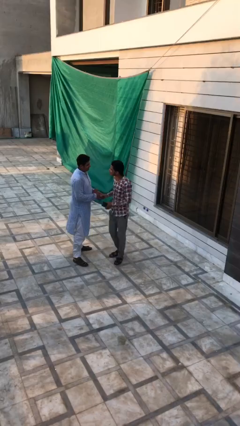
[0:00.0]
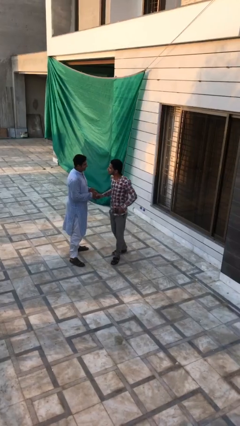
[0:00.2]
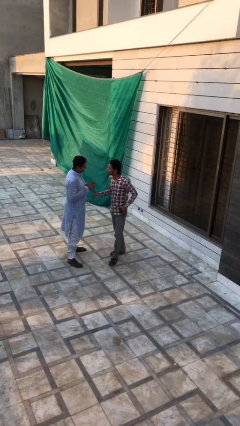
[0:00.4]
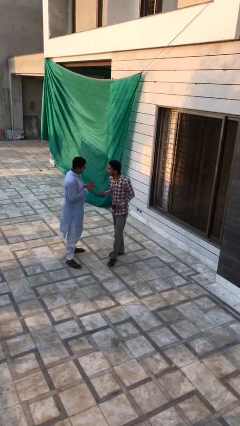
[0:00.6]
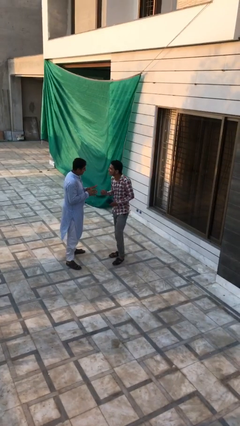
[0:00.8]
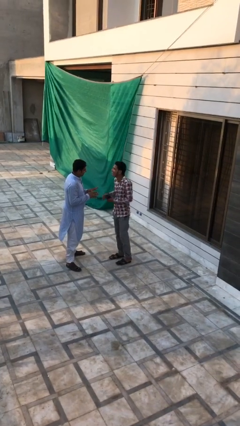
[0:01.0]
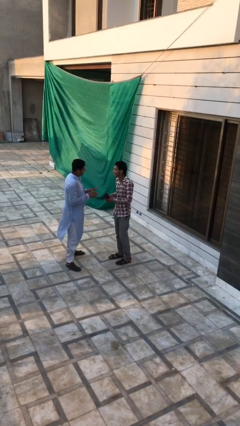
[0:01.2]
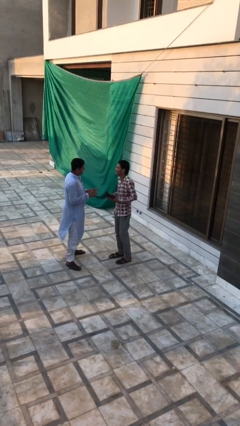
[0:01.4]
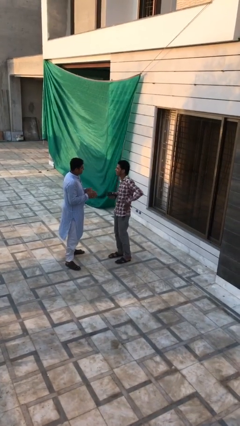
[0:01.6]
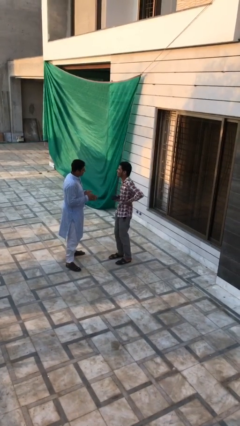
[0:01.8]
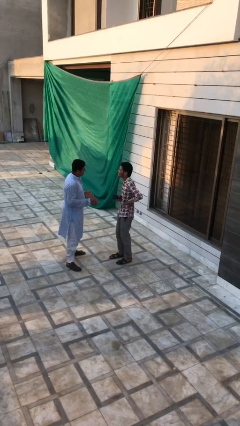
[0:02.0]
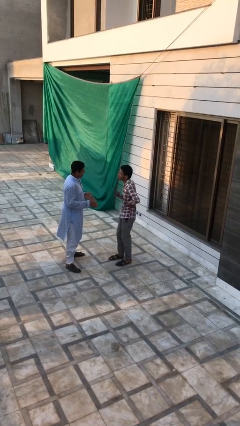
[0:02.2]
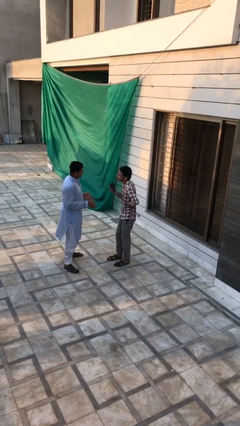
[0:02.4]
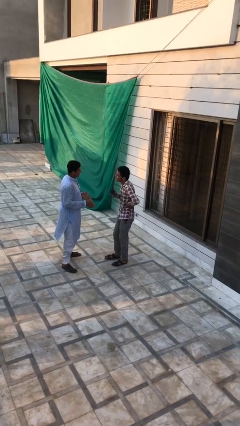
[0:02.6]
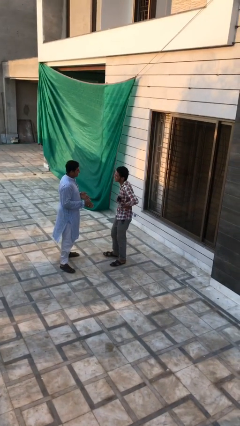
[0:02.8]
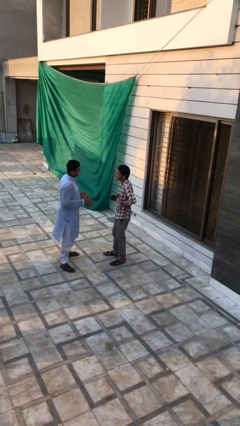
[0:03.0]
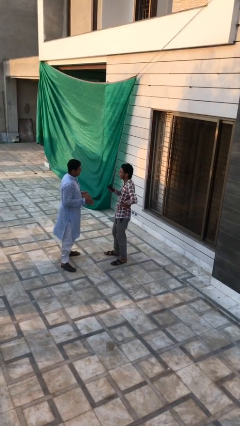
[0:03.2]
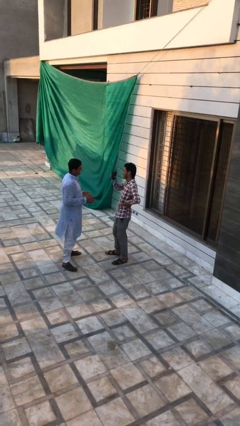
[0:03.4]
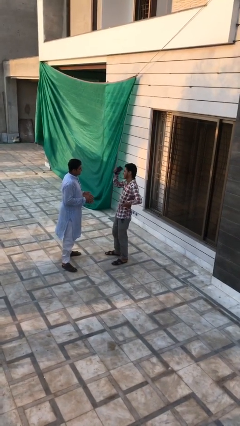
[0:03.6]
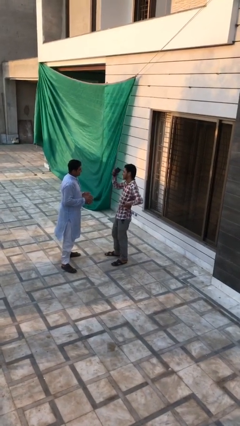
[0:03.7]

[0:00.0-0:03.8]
person talks to person

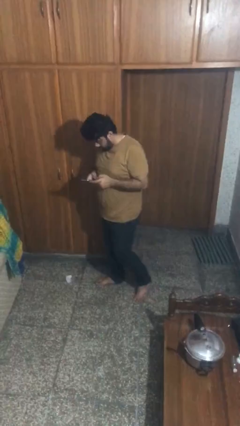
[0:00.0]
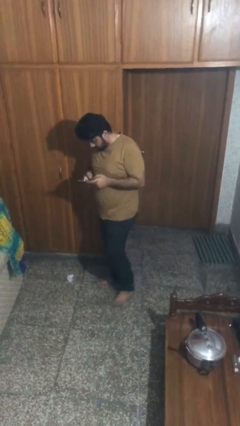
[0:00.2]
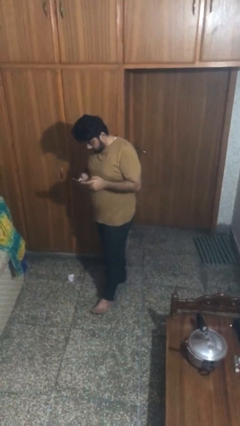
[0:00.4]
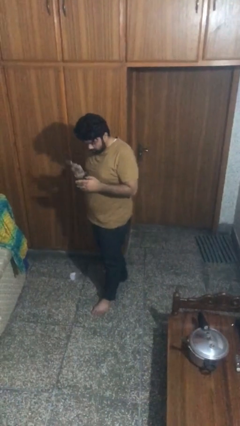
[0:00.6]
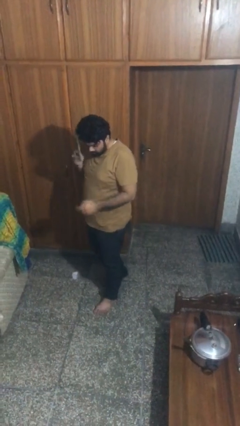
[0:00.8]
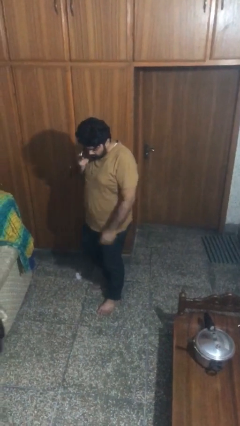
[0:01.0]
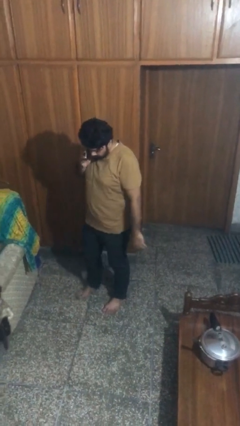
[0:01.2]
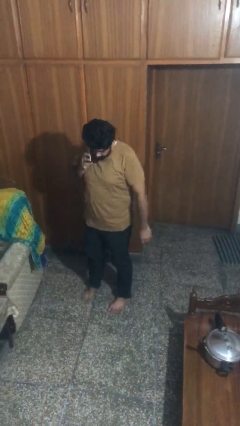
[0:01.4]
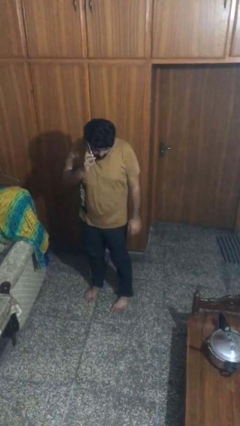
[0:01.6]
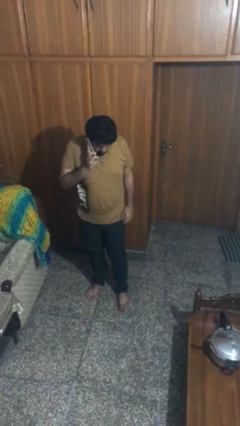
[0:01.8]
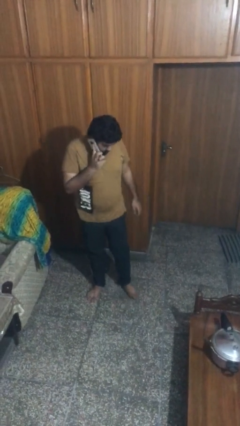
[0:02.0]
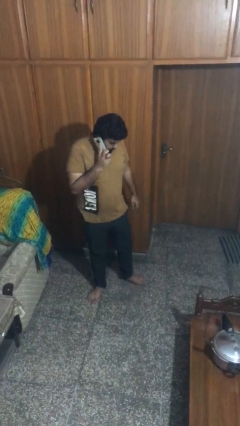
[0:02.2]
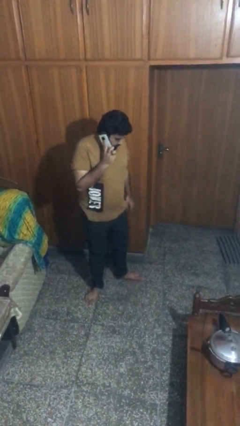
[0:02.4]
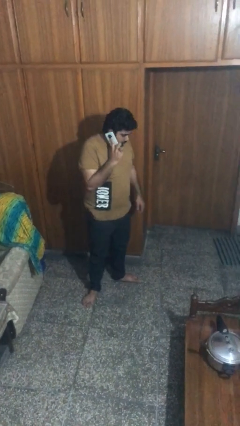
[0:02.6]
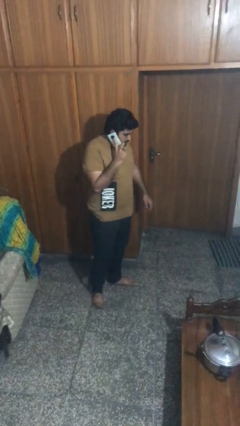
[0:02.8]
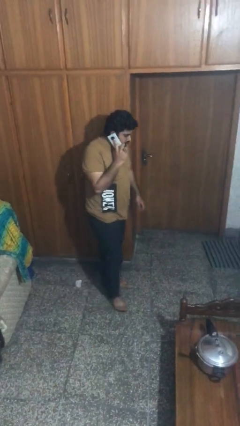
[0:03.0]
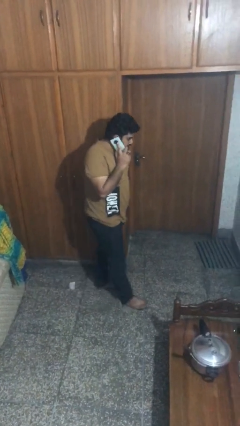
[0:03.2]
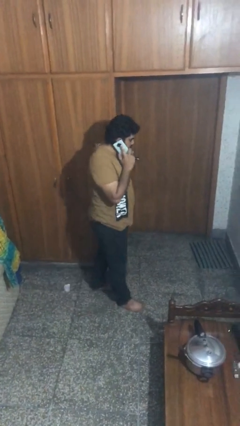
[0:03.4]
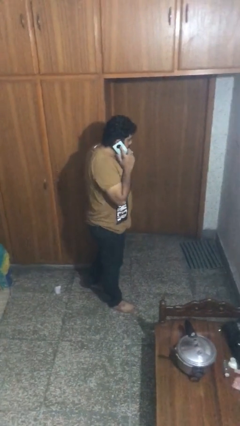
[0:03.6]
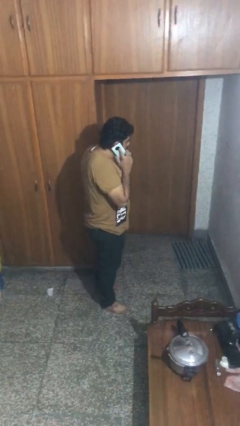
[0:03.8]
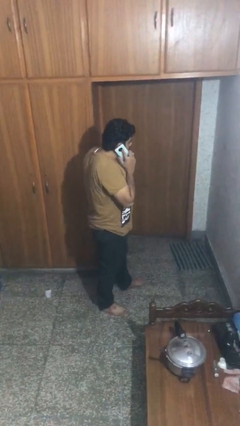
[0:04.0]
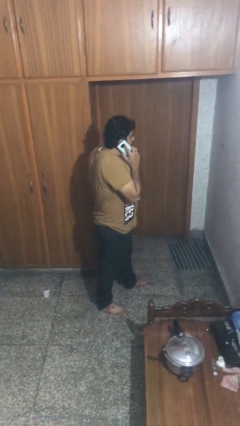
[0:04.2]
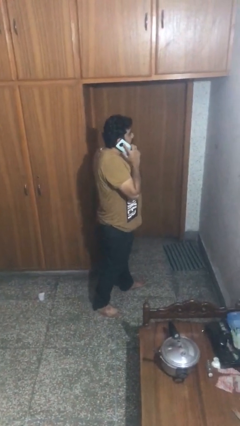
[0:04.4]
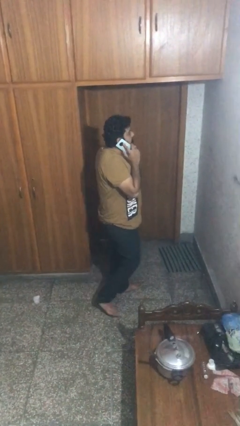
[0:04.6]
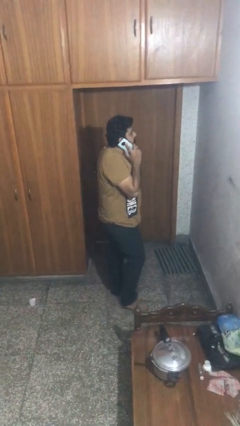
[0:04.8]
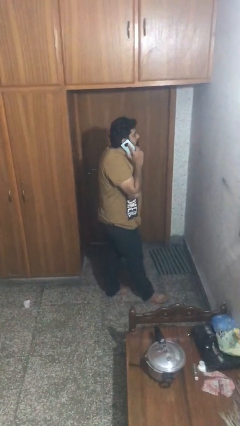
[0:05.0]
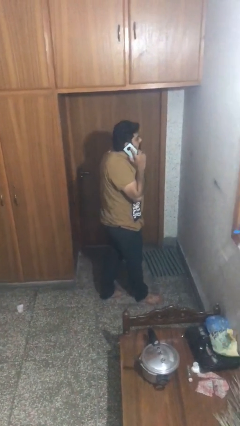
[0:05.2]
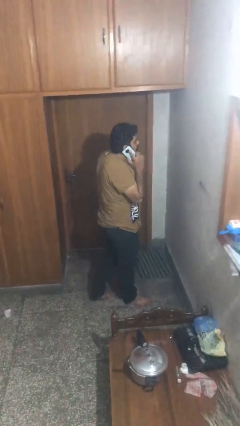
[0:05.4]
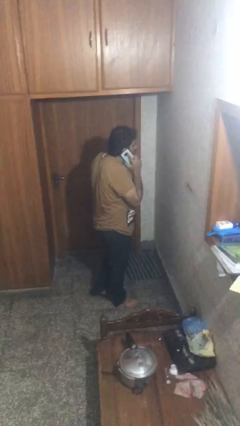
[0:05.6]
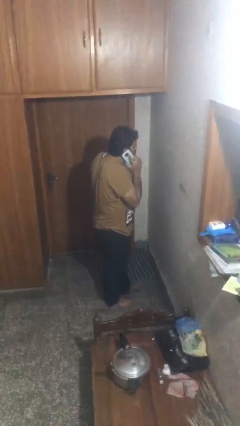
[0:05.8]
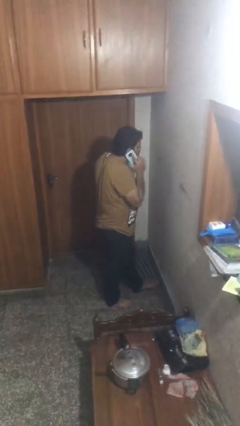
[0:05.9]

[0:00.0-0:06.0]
person talks on phone

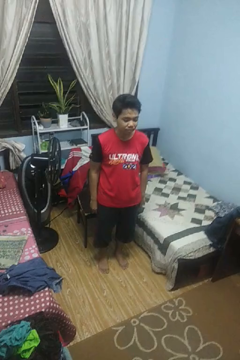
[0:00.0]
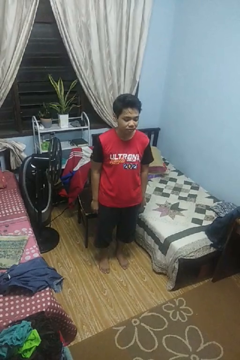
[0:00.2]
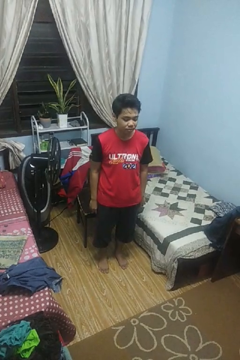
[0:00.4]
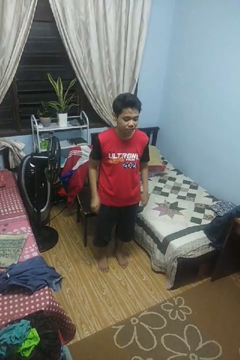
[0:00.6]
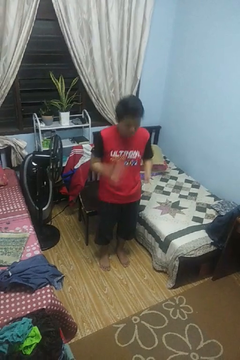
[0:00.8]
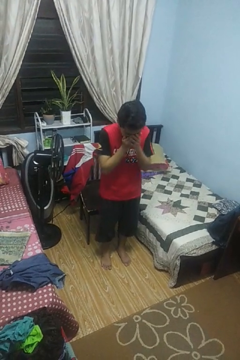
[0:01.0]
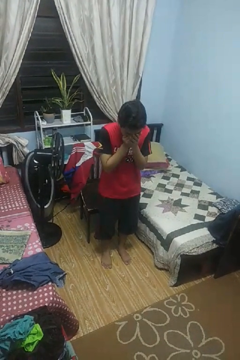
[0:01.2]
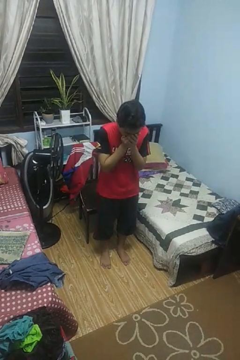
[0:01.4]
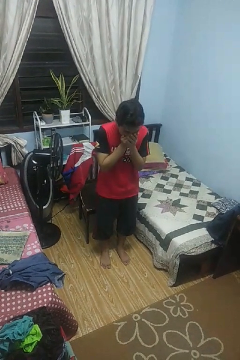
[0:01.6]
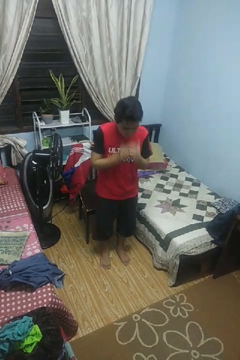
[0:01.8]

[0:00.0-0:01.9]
person sneezes into hand

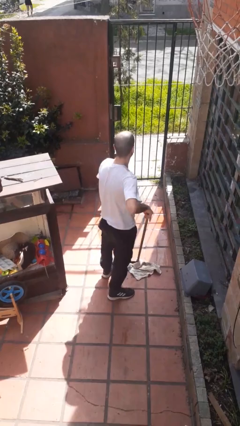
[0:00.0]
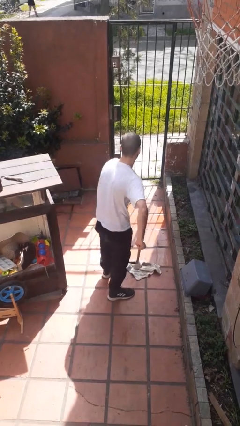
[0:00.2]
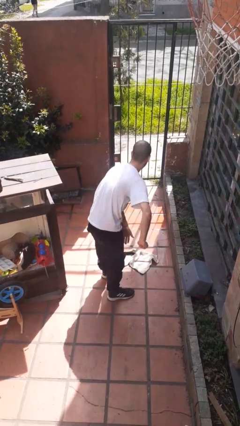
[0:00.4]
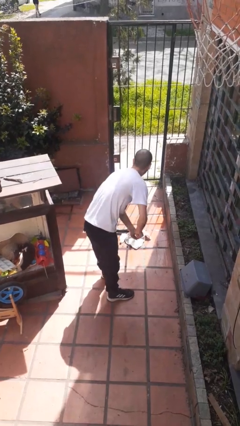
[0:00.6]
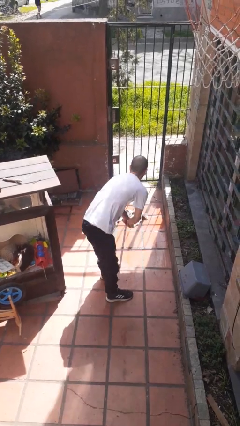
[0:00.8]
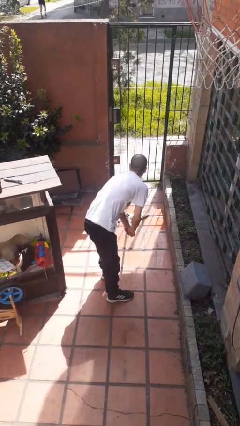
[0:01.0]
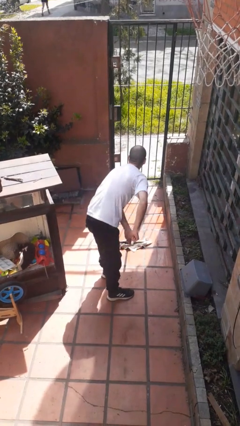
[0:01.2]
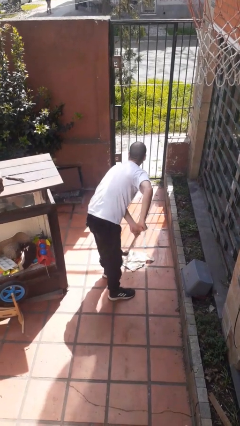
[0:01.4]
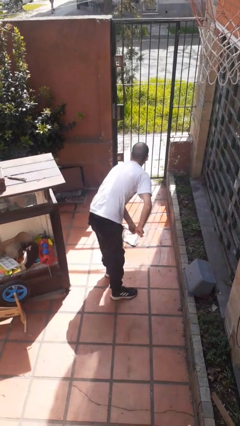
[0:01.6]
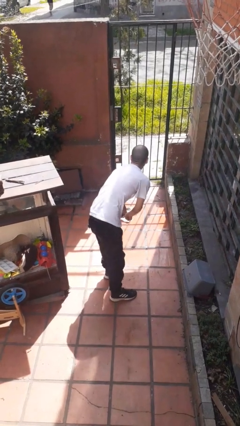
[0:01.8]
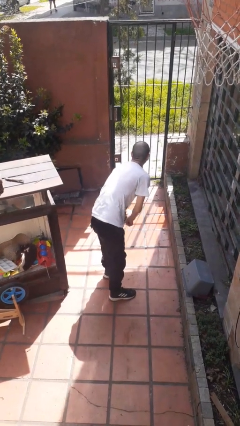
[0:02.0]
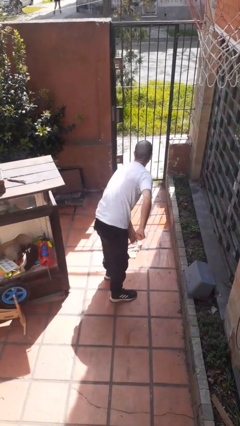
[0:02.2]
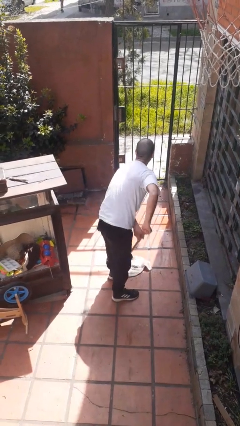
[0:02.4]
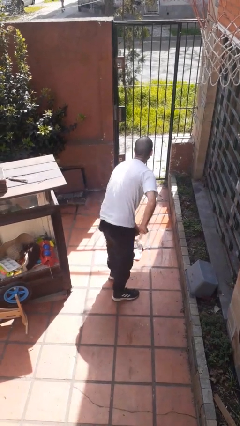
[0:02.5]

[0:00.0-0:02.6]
person mops

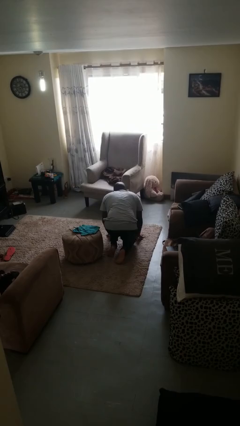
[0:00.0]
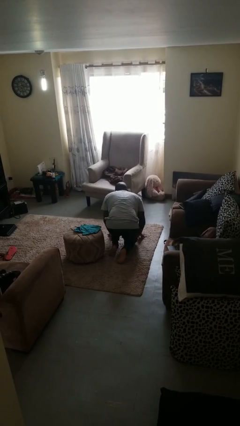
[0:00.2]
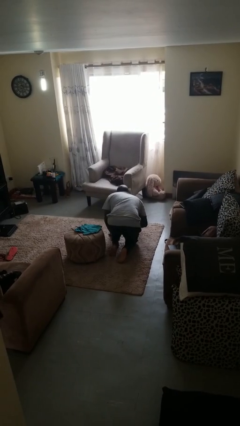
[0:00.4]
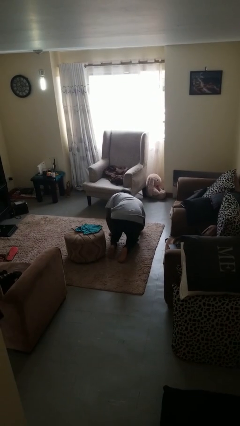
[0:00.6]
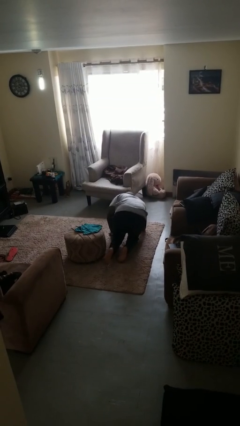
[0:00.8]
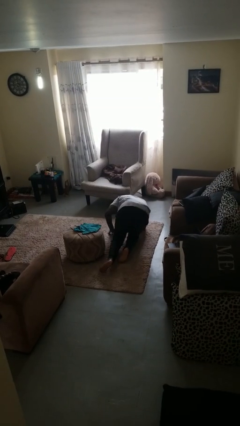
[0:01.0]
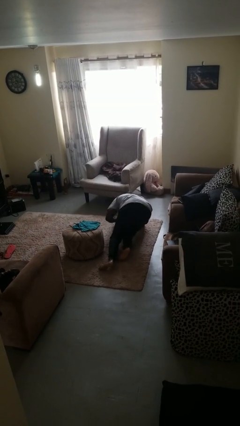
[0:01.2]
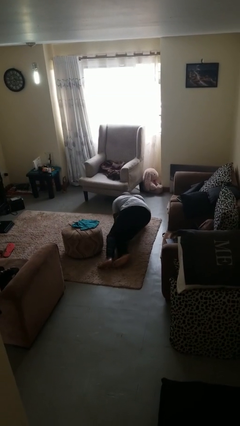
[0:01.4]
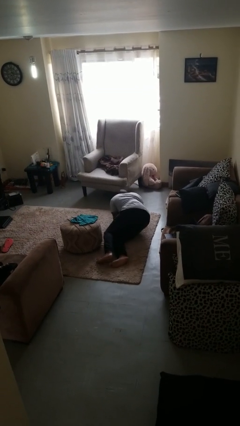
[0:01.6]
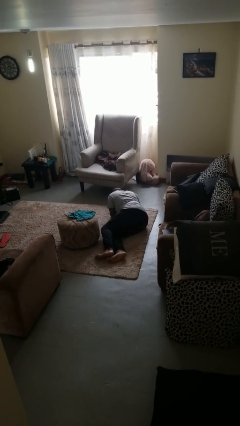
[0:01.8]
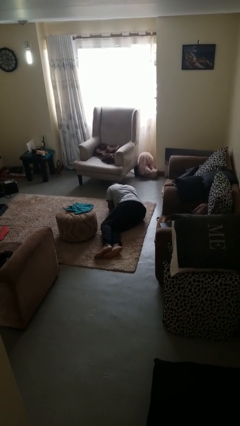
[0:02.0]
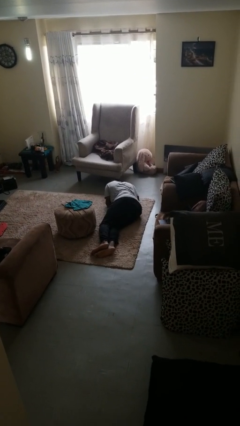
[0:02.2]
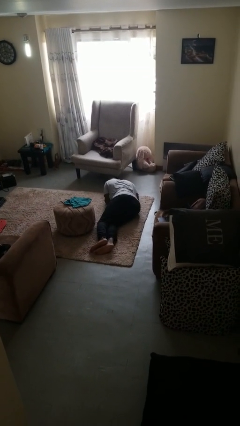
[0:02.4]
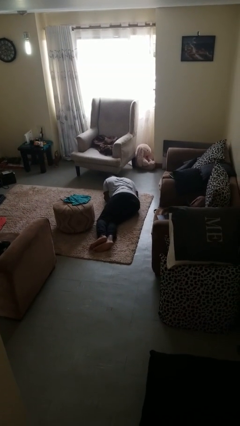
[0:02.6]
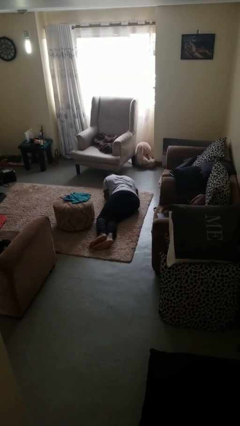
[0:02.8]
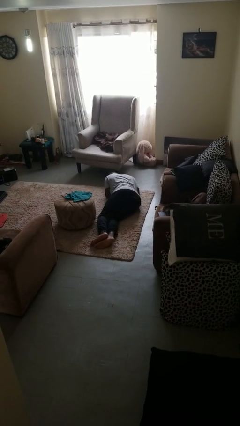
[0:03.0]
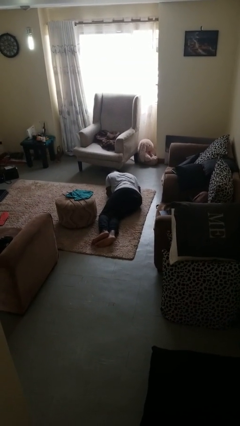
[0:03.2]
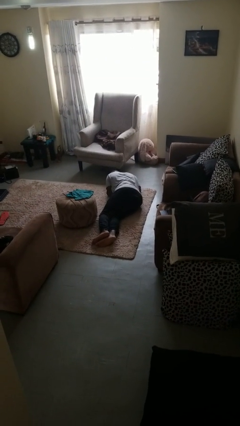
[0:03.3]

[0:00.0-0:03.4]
person lies down on floor
